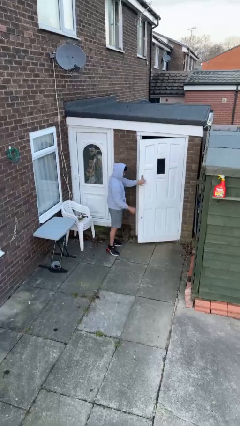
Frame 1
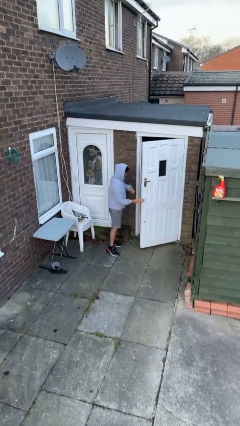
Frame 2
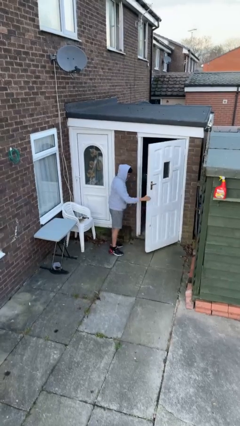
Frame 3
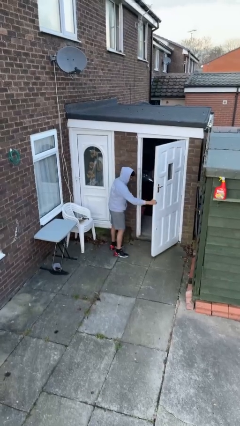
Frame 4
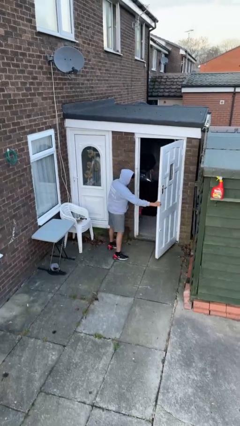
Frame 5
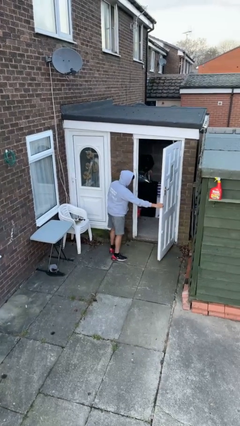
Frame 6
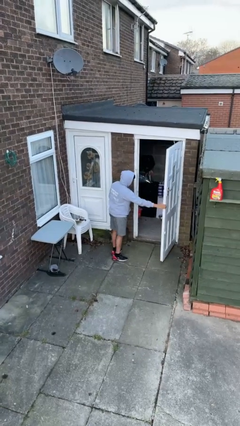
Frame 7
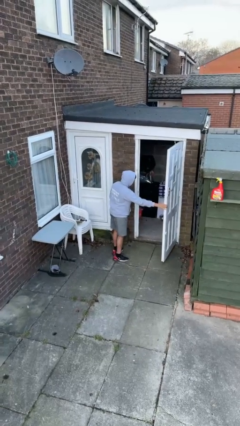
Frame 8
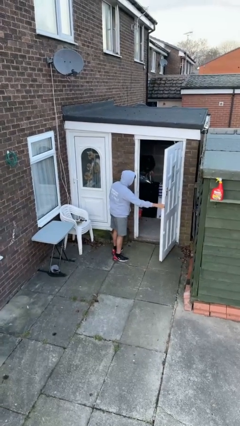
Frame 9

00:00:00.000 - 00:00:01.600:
person opens facility door

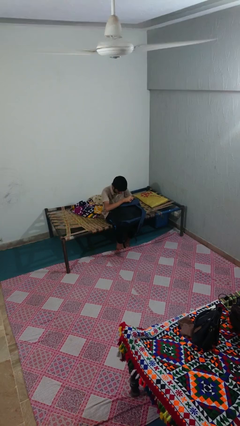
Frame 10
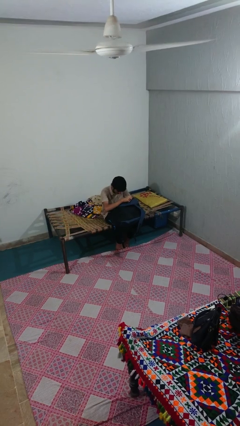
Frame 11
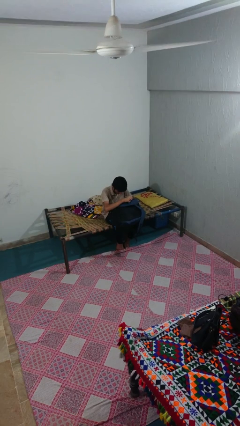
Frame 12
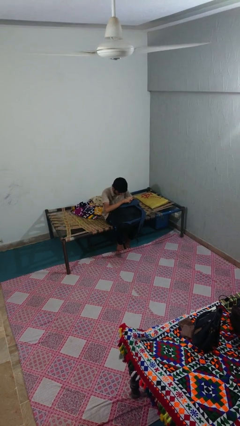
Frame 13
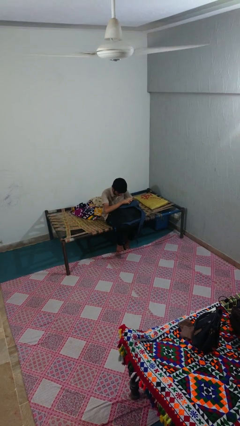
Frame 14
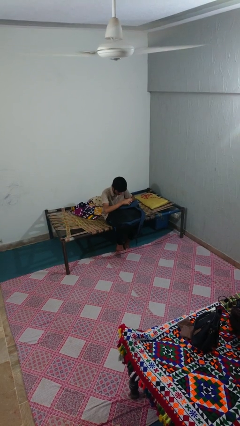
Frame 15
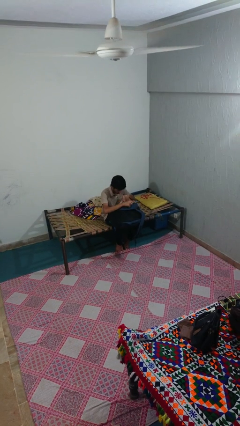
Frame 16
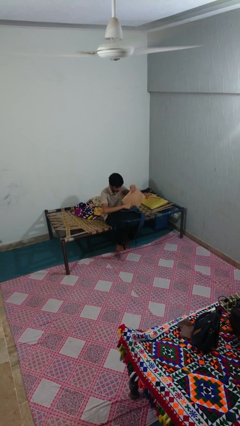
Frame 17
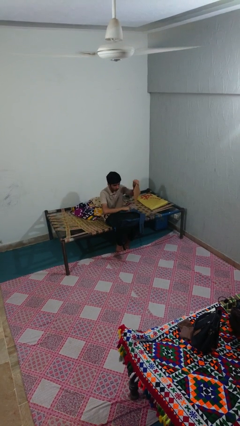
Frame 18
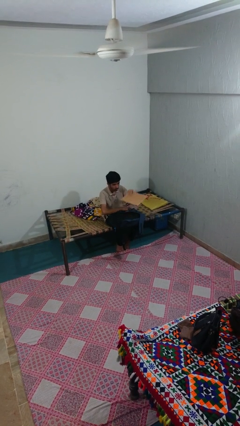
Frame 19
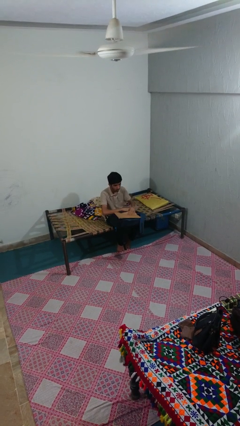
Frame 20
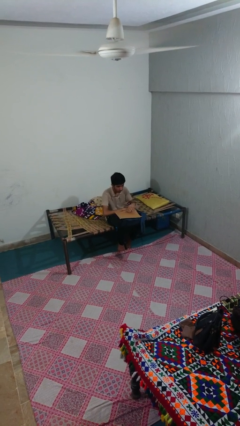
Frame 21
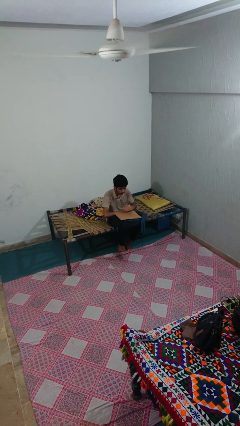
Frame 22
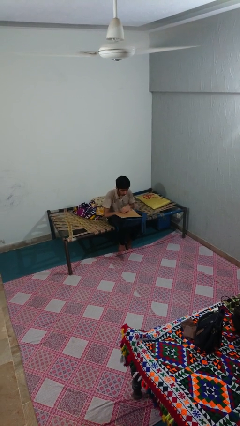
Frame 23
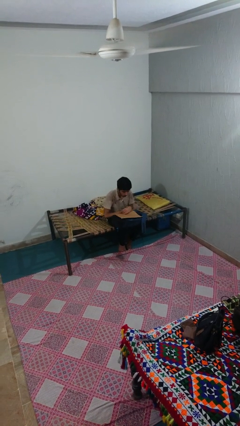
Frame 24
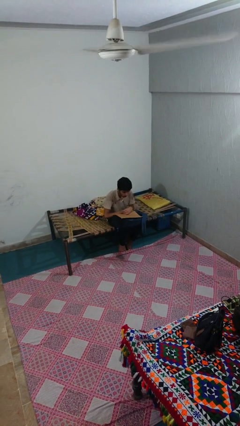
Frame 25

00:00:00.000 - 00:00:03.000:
person takes object from backpack

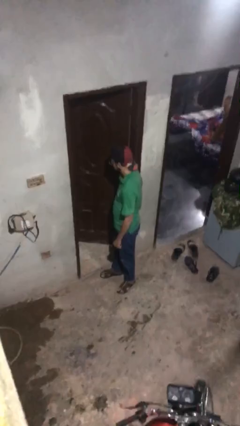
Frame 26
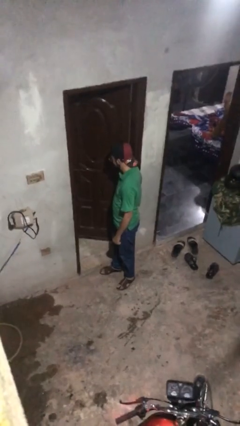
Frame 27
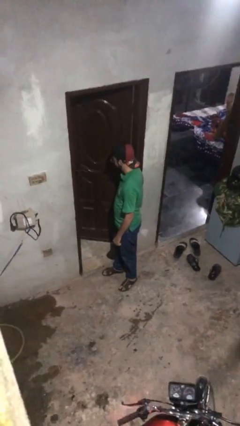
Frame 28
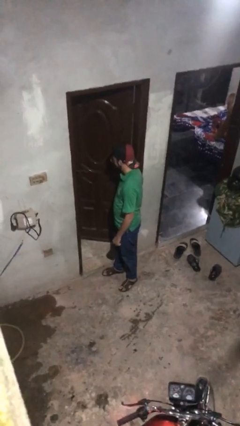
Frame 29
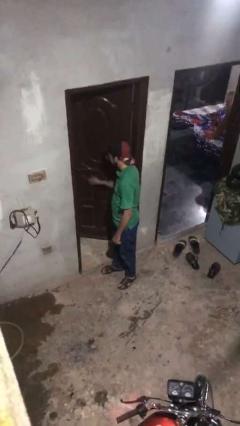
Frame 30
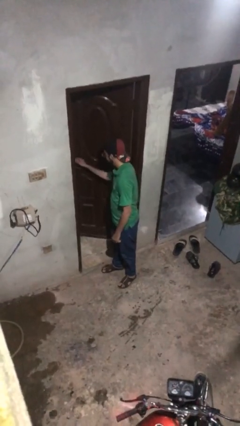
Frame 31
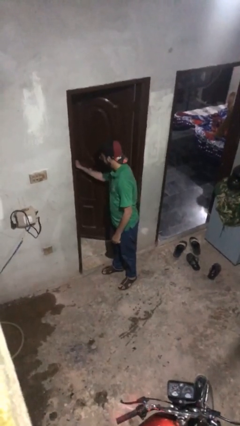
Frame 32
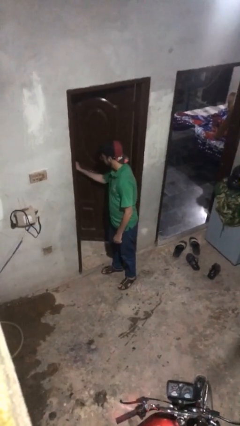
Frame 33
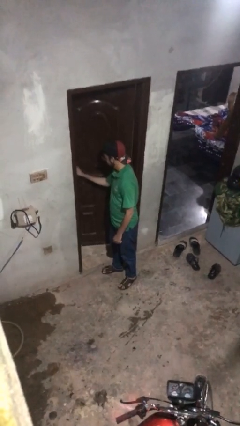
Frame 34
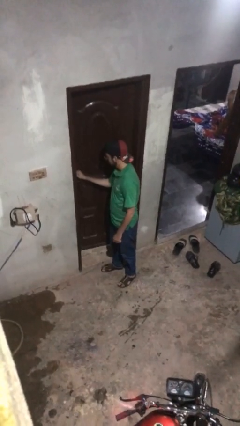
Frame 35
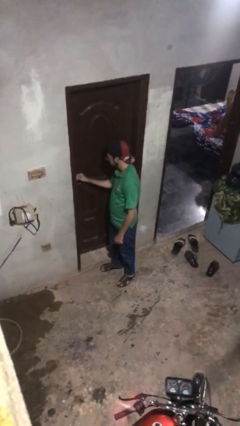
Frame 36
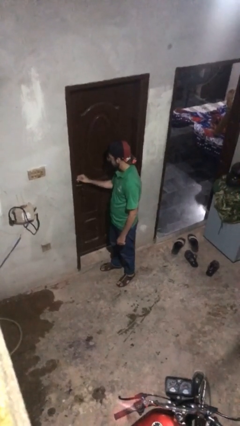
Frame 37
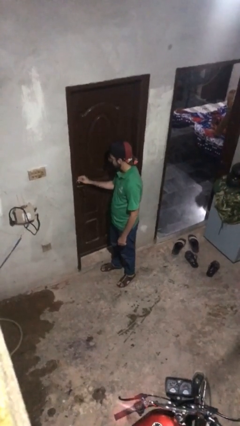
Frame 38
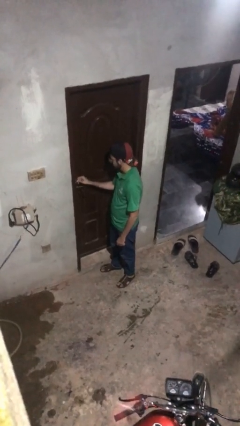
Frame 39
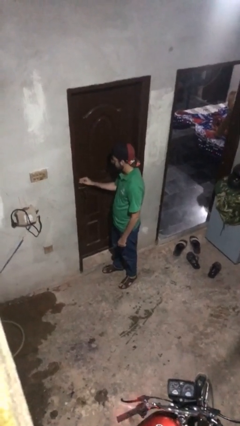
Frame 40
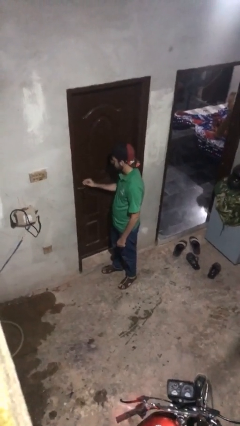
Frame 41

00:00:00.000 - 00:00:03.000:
person closes facility door

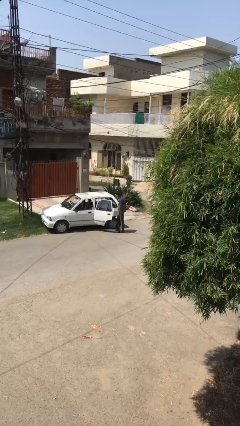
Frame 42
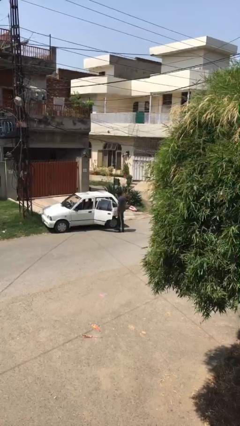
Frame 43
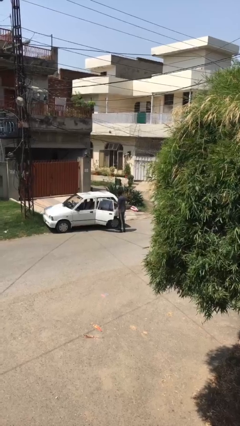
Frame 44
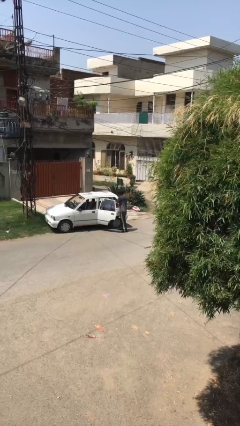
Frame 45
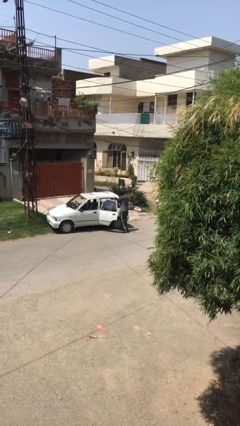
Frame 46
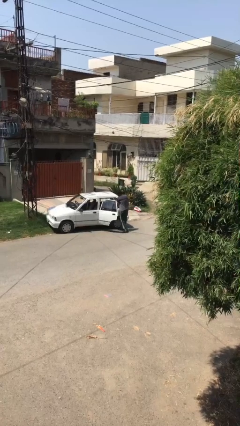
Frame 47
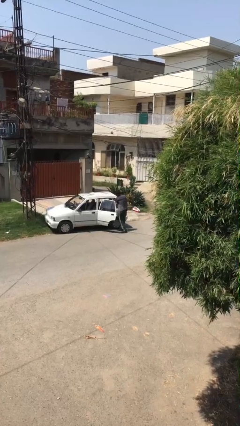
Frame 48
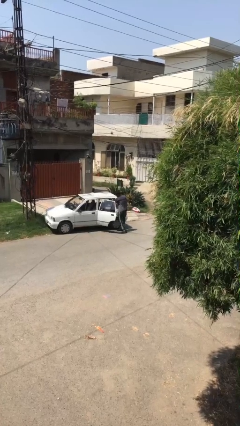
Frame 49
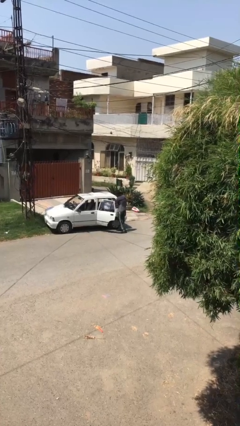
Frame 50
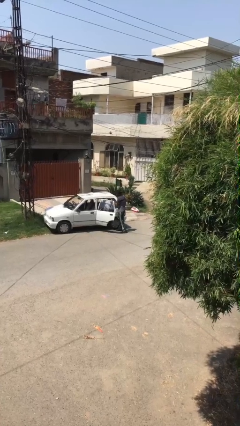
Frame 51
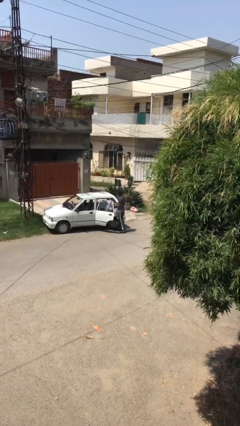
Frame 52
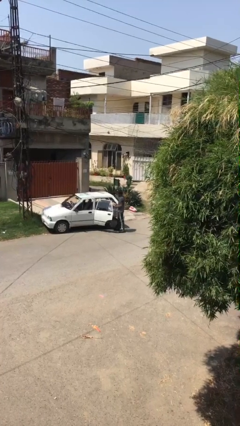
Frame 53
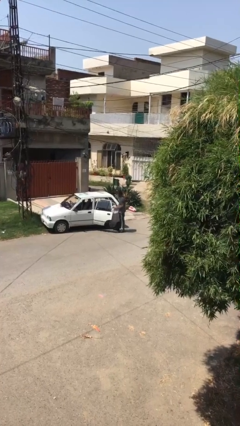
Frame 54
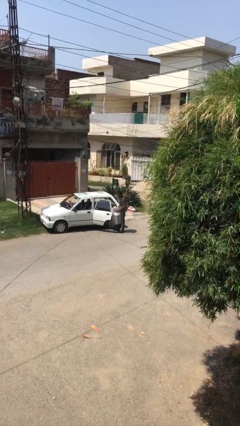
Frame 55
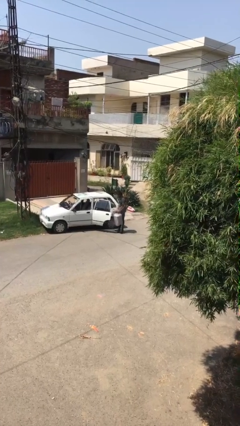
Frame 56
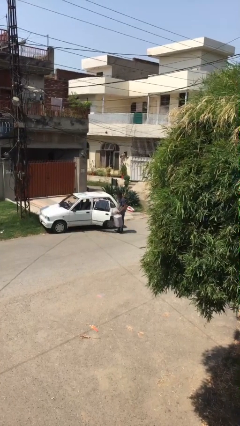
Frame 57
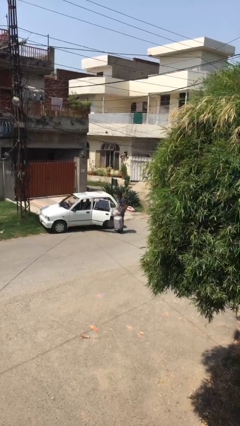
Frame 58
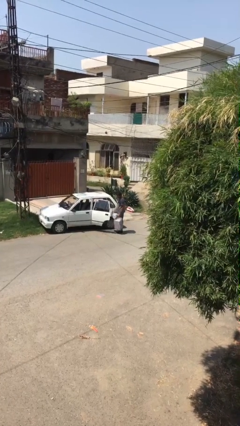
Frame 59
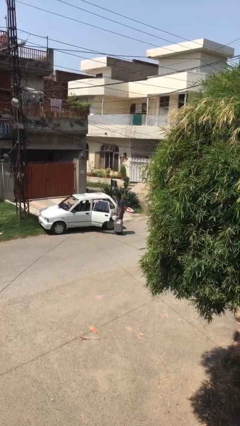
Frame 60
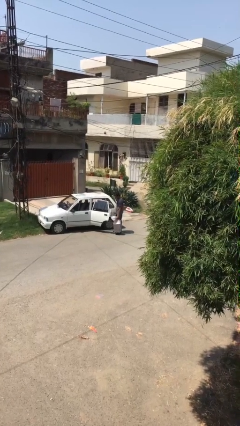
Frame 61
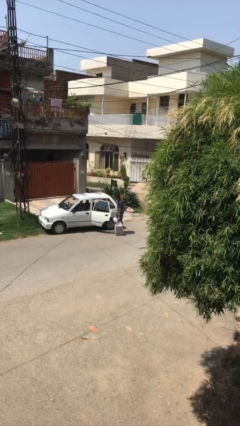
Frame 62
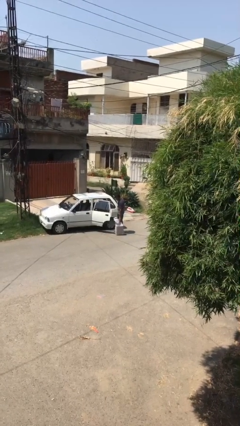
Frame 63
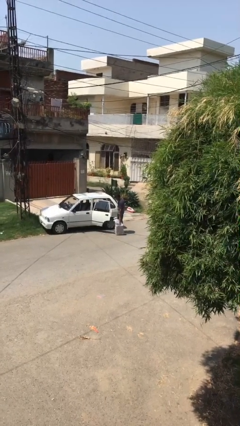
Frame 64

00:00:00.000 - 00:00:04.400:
person unloads car

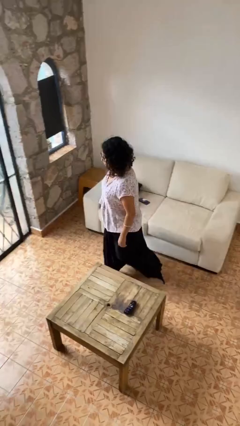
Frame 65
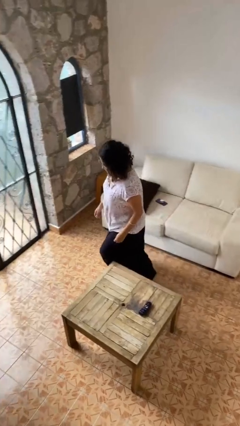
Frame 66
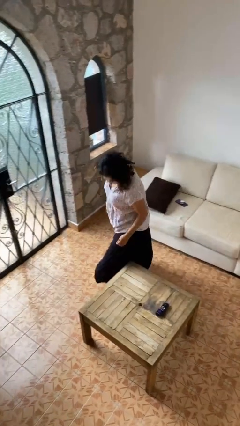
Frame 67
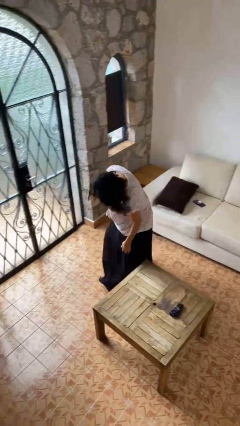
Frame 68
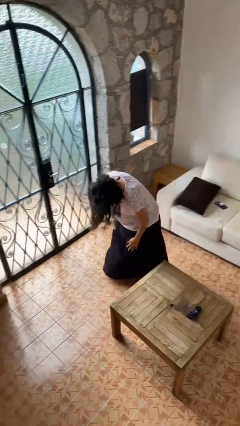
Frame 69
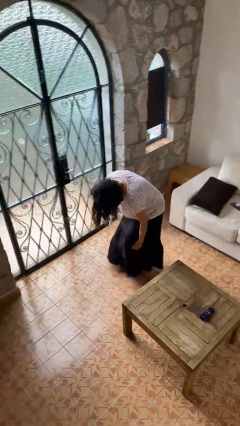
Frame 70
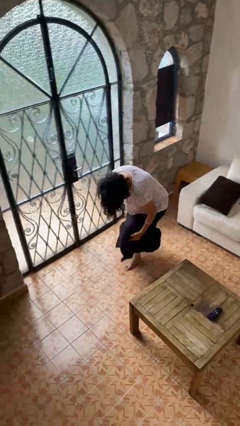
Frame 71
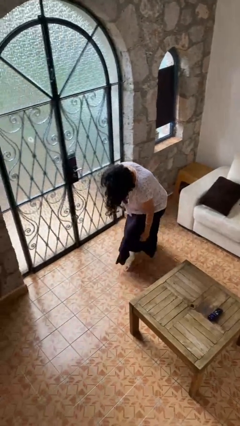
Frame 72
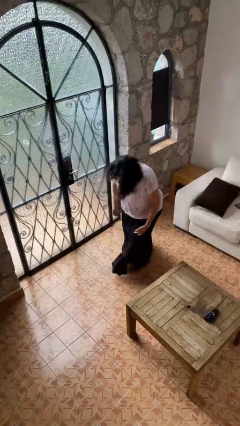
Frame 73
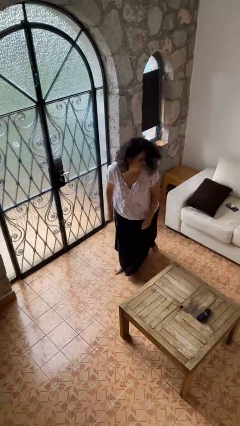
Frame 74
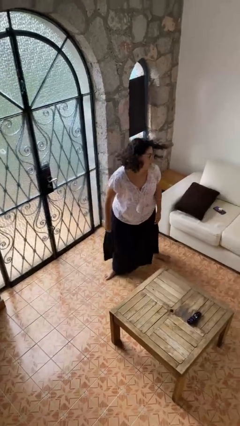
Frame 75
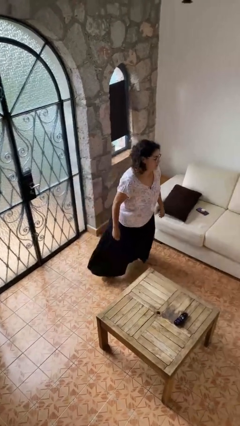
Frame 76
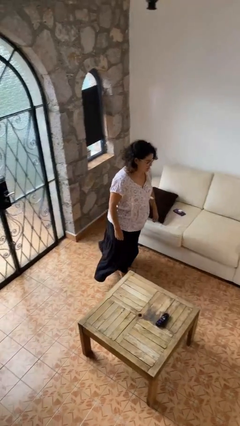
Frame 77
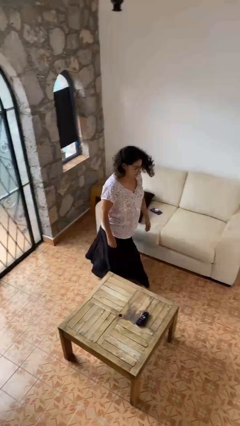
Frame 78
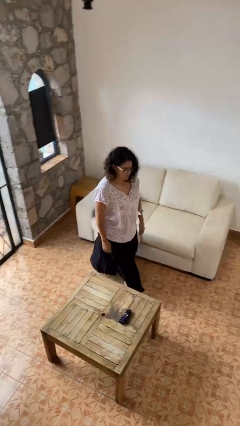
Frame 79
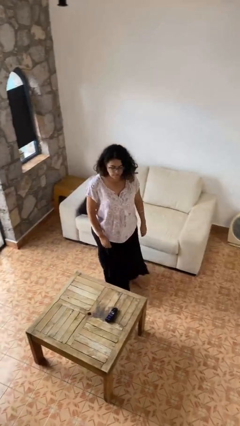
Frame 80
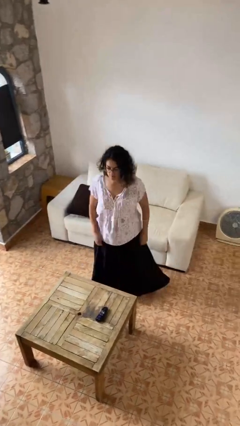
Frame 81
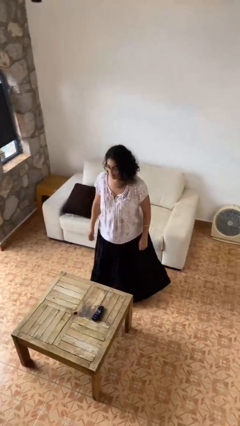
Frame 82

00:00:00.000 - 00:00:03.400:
person bumps into table

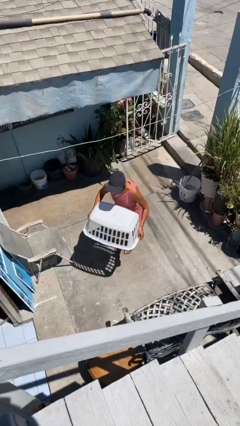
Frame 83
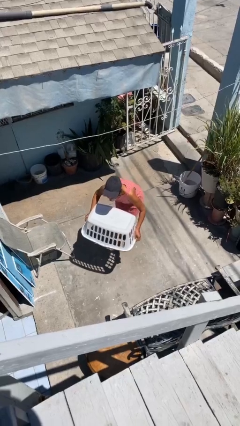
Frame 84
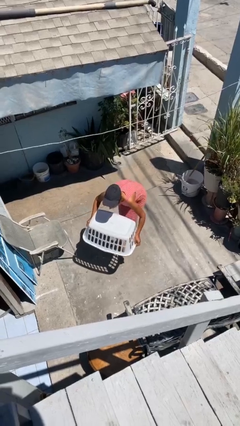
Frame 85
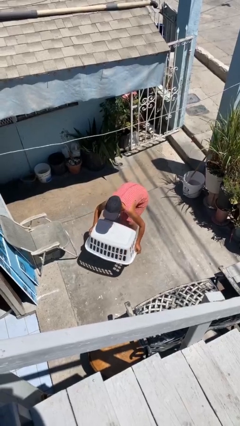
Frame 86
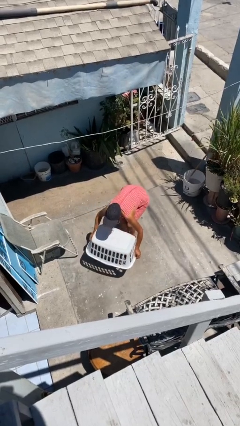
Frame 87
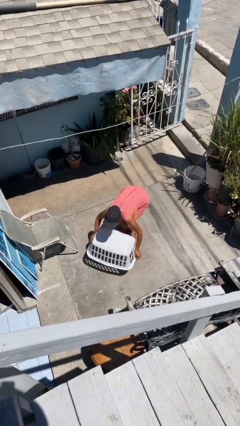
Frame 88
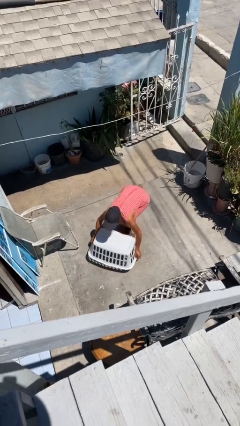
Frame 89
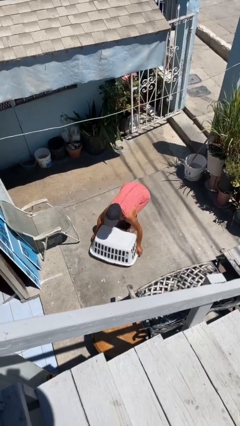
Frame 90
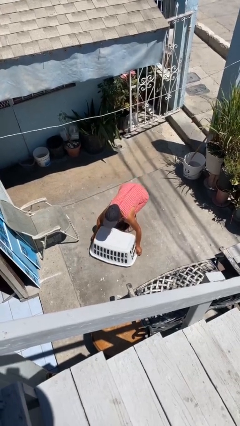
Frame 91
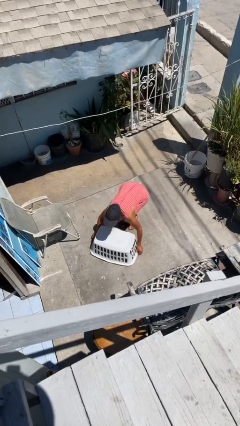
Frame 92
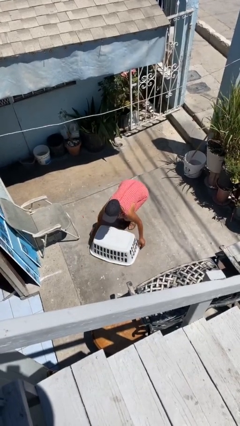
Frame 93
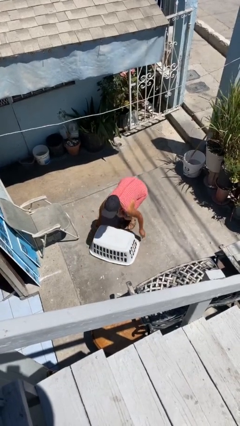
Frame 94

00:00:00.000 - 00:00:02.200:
person puts down object on floor
